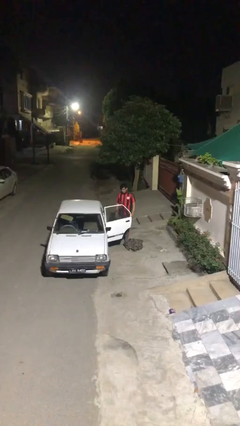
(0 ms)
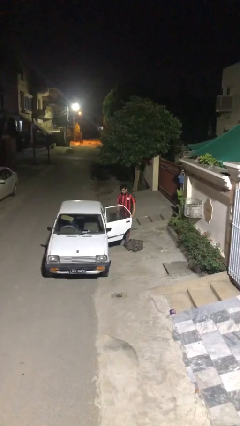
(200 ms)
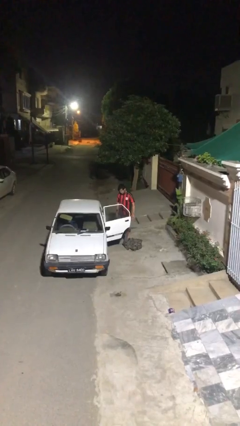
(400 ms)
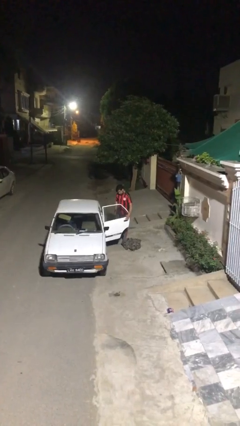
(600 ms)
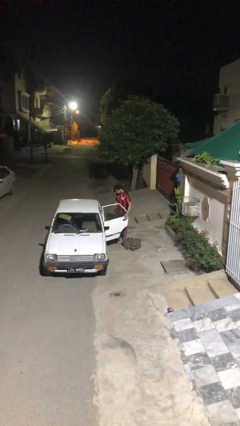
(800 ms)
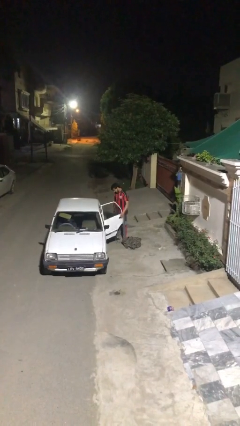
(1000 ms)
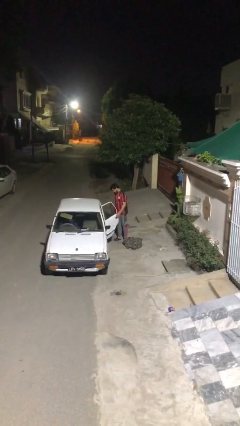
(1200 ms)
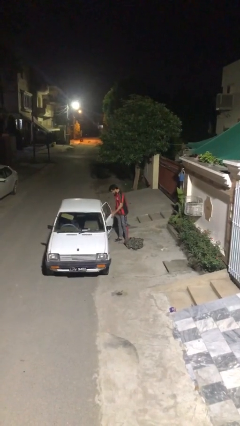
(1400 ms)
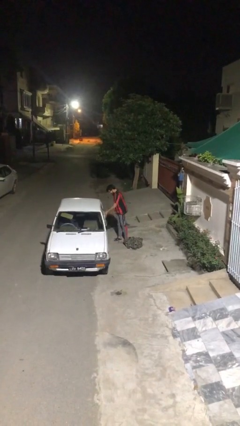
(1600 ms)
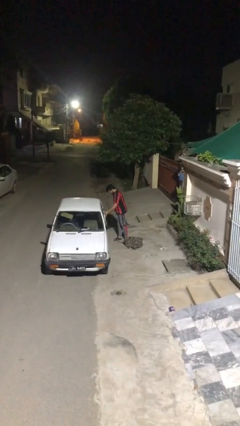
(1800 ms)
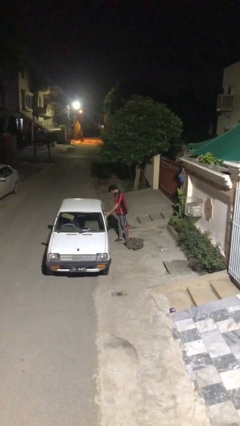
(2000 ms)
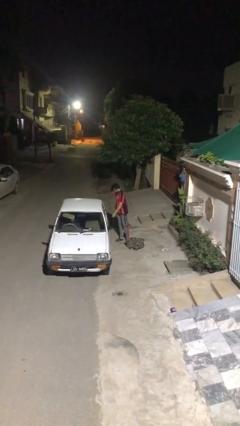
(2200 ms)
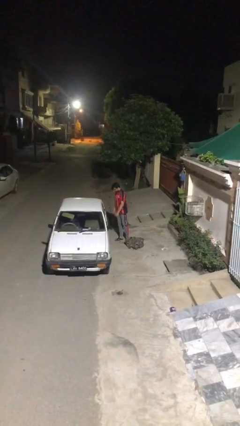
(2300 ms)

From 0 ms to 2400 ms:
person closes car door

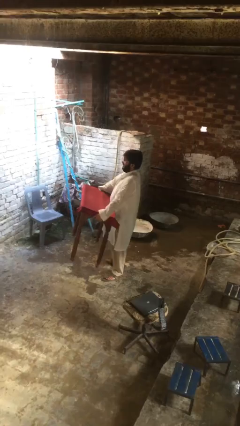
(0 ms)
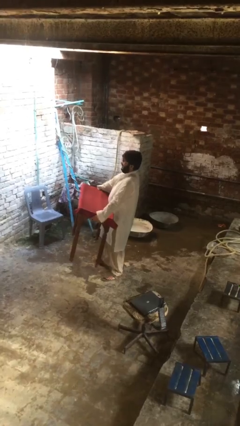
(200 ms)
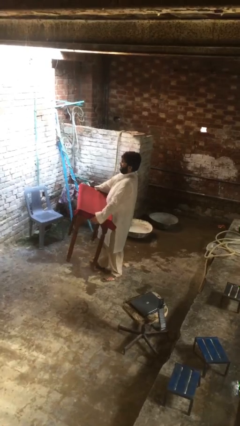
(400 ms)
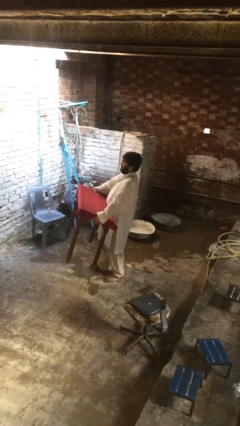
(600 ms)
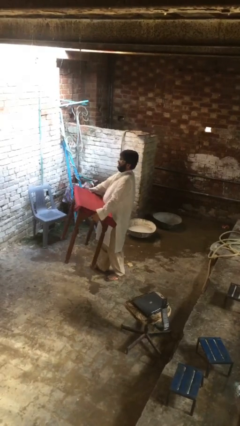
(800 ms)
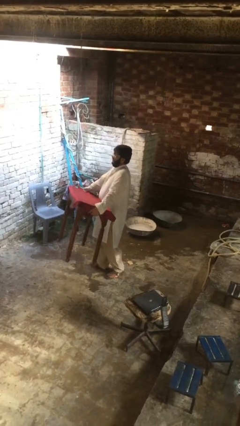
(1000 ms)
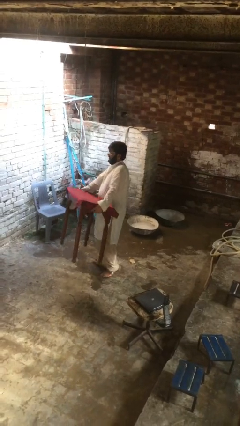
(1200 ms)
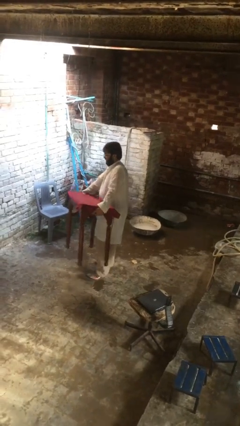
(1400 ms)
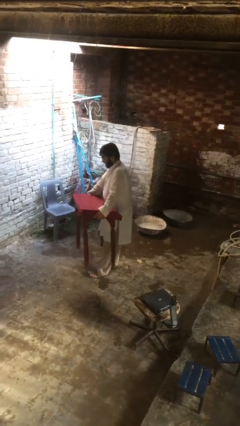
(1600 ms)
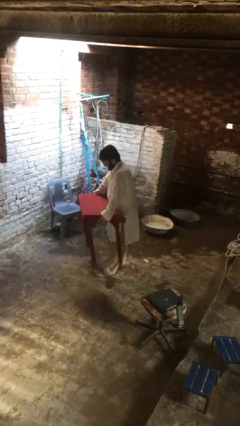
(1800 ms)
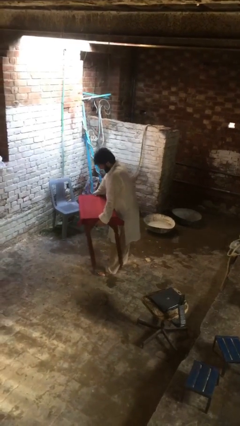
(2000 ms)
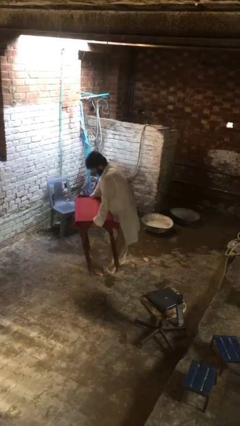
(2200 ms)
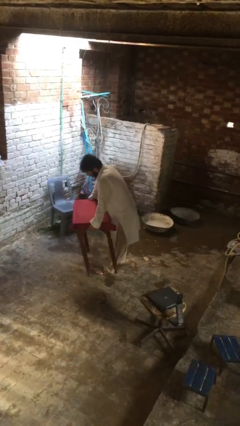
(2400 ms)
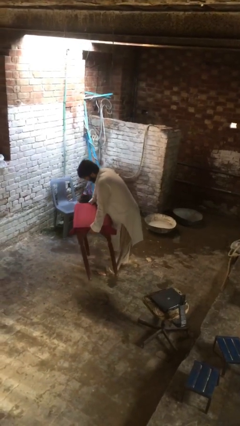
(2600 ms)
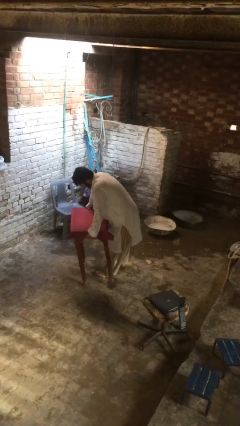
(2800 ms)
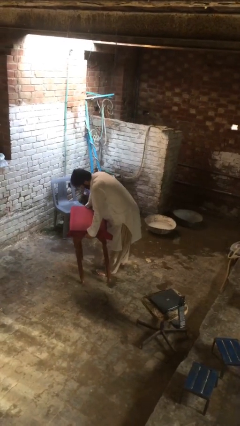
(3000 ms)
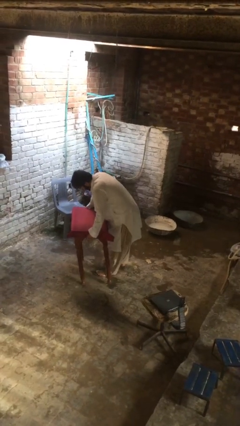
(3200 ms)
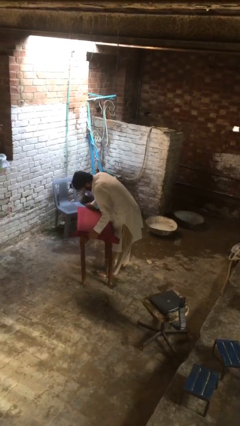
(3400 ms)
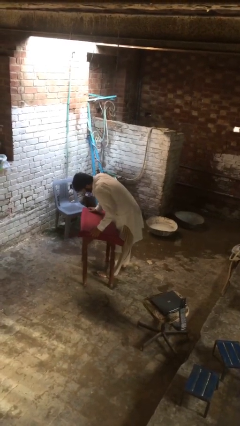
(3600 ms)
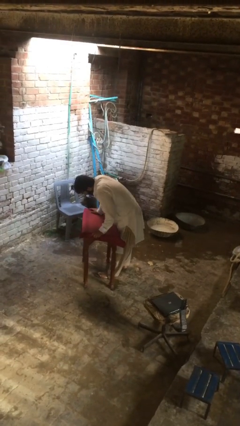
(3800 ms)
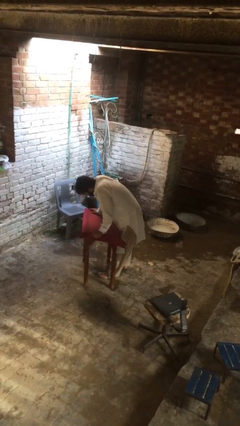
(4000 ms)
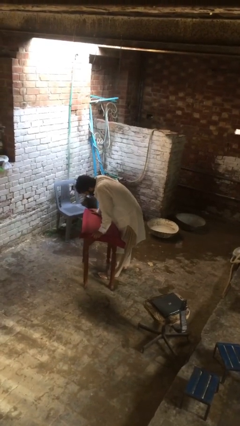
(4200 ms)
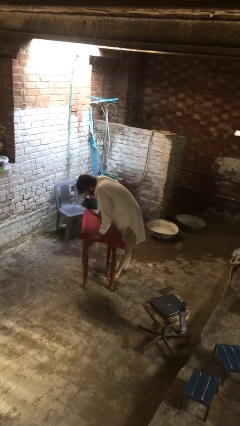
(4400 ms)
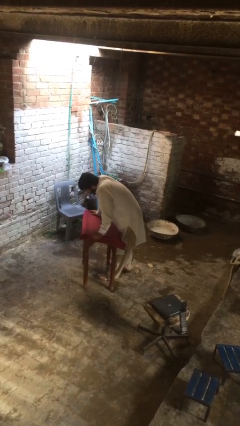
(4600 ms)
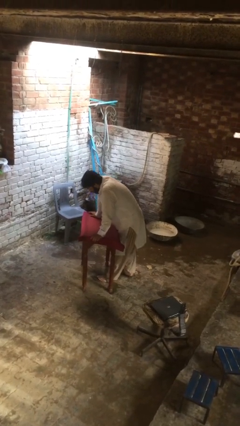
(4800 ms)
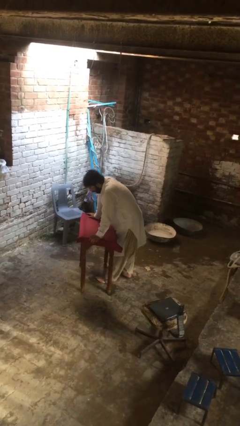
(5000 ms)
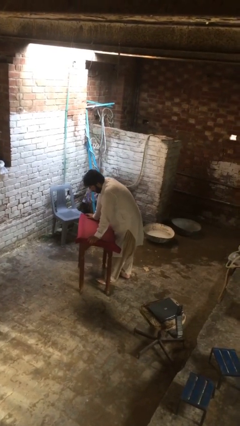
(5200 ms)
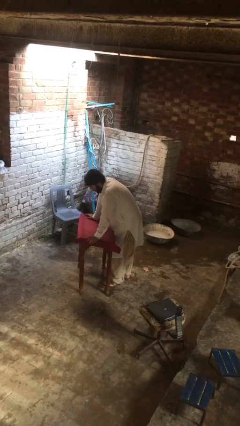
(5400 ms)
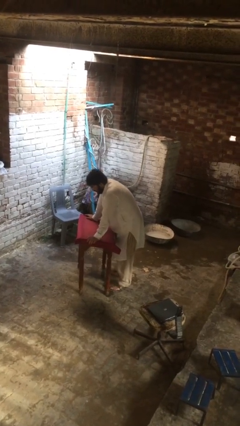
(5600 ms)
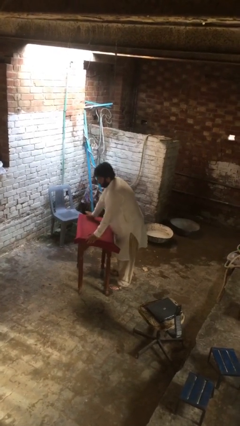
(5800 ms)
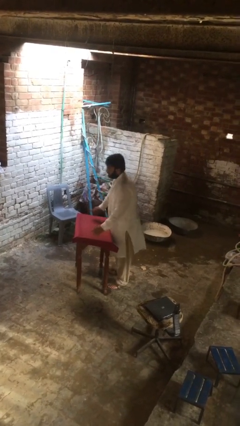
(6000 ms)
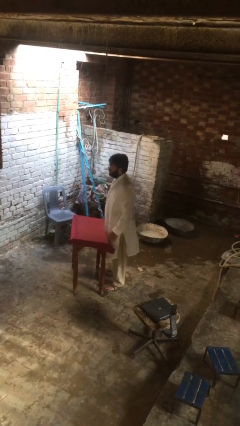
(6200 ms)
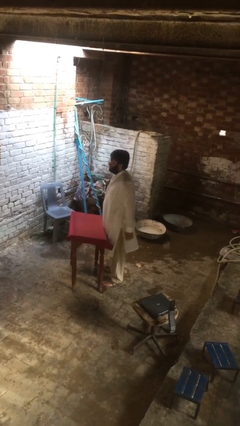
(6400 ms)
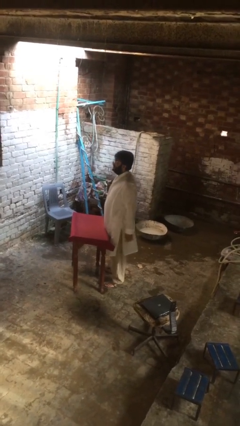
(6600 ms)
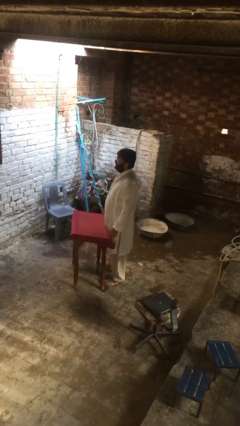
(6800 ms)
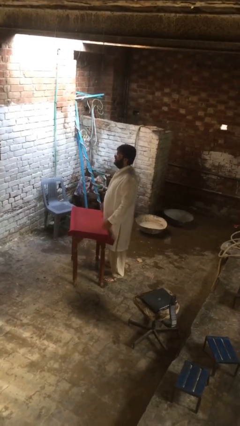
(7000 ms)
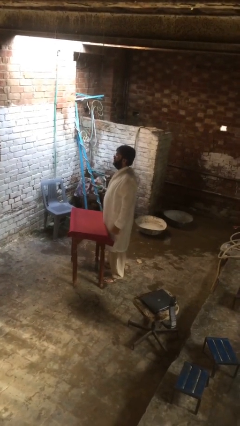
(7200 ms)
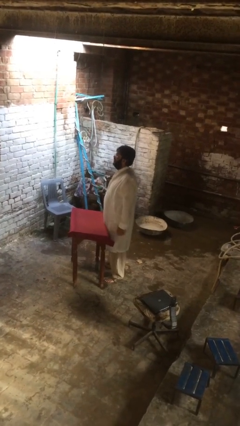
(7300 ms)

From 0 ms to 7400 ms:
person puts down object on floor

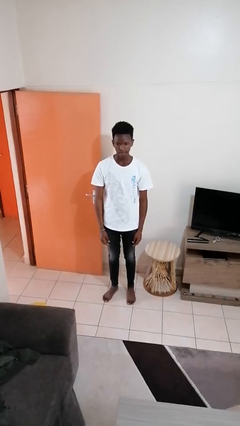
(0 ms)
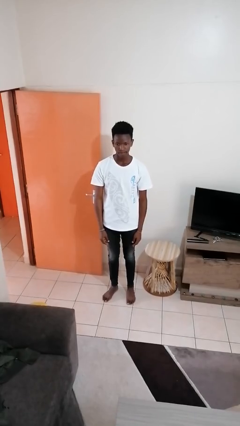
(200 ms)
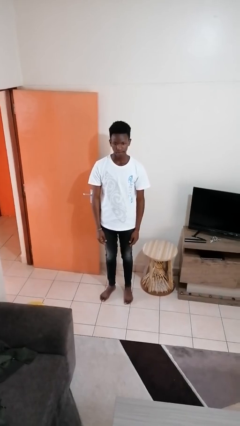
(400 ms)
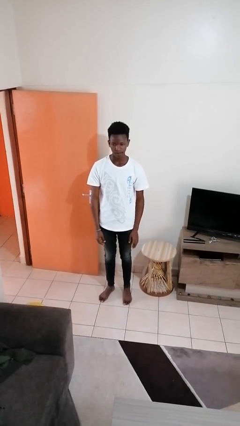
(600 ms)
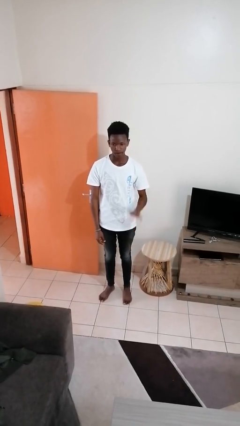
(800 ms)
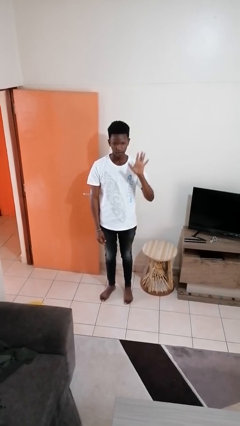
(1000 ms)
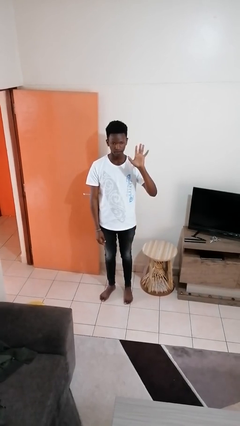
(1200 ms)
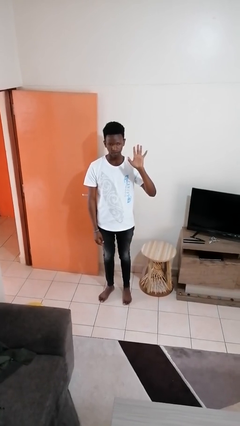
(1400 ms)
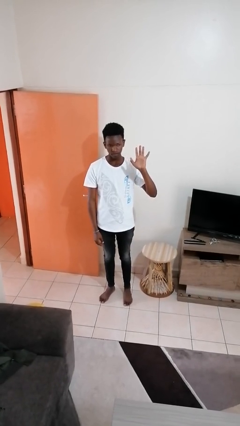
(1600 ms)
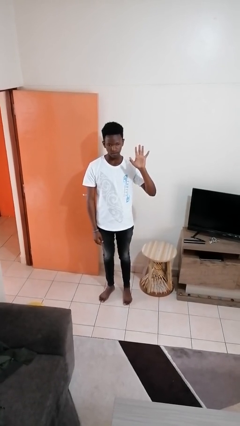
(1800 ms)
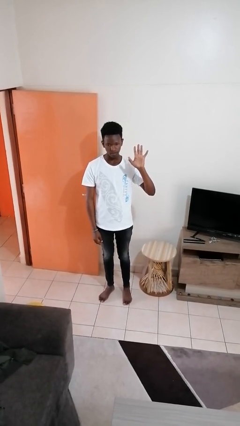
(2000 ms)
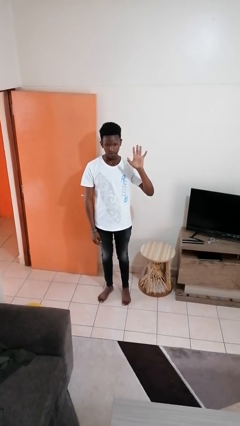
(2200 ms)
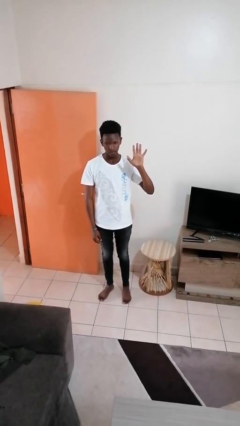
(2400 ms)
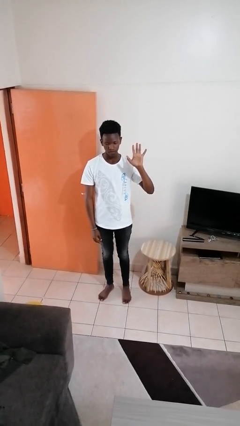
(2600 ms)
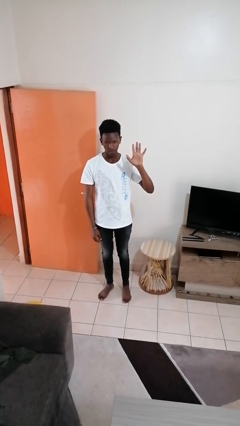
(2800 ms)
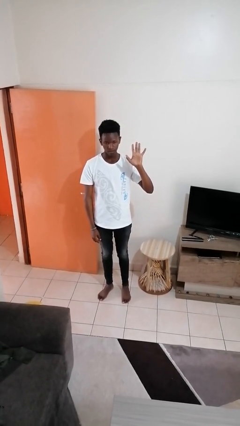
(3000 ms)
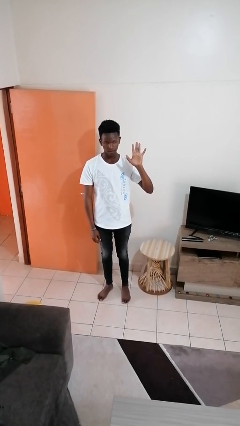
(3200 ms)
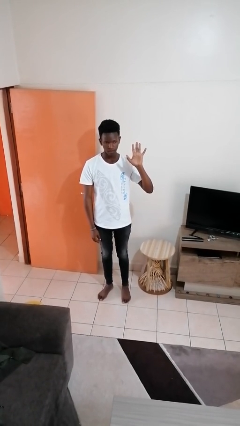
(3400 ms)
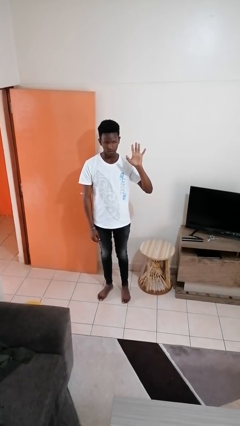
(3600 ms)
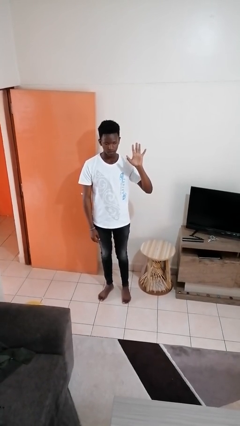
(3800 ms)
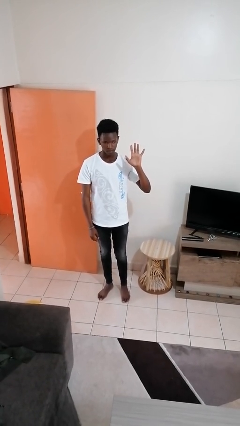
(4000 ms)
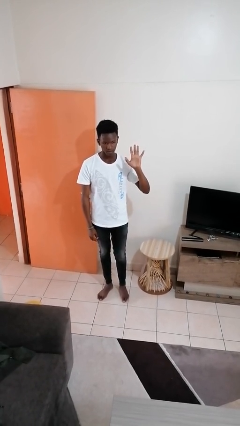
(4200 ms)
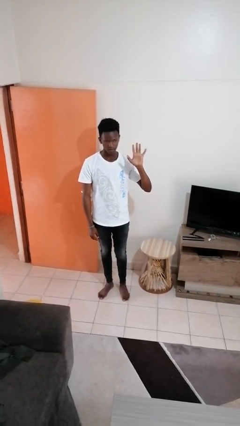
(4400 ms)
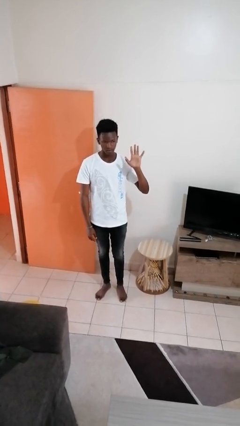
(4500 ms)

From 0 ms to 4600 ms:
person gestures number five

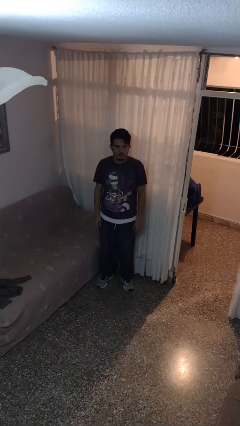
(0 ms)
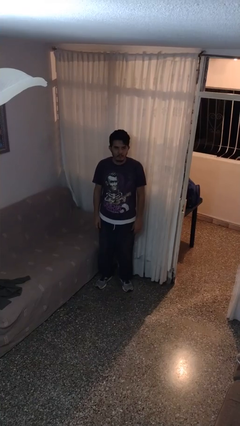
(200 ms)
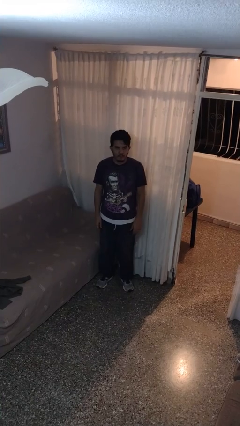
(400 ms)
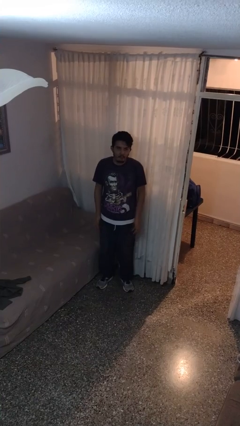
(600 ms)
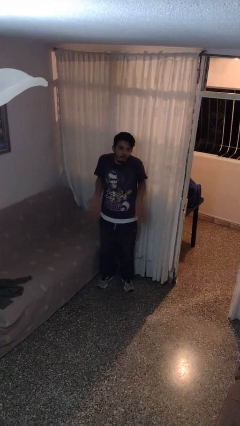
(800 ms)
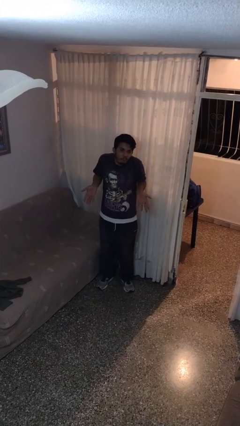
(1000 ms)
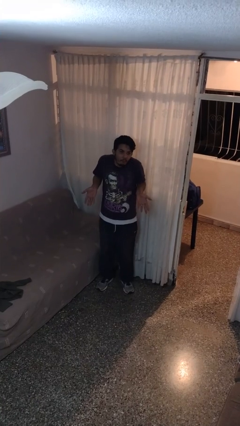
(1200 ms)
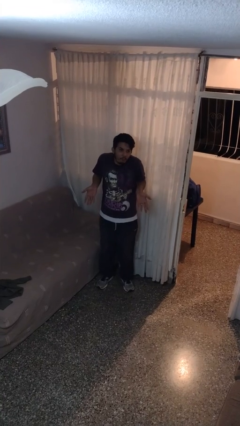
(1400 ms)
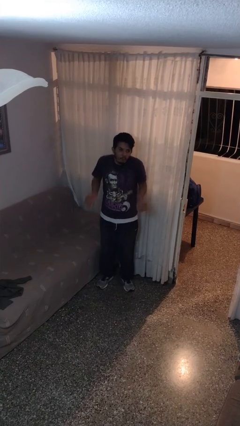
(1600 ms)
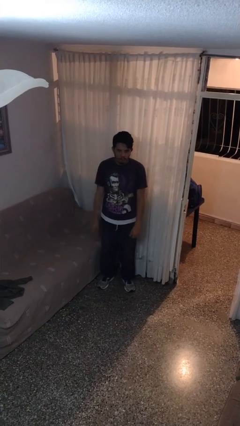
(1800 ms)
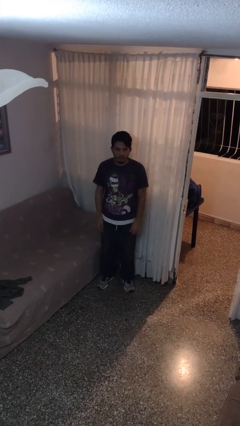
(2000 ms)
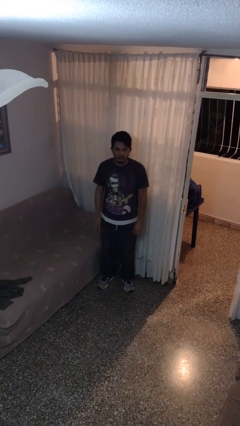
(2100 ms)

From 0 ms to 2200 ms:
person shrugs

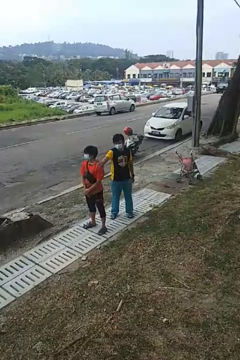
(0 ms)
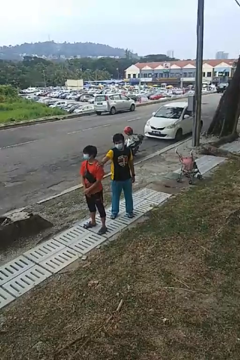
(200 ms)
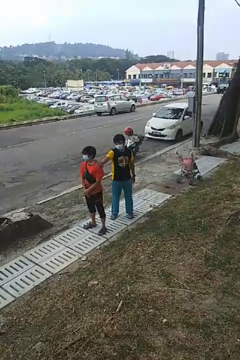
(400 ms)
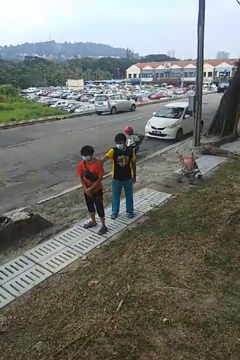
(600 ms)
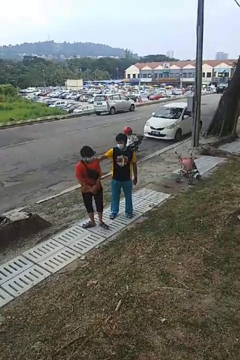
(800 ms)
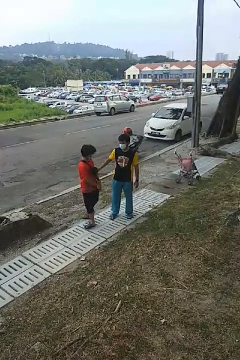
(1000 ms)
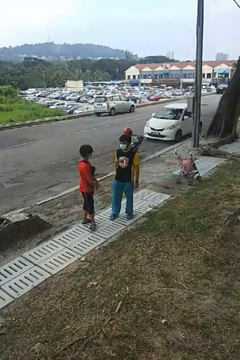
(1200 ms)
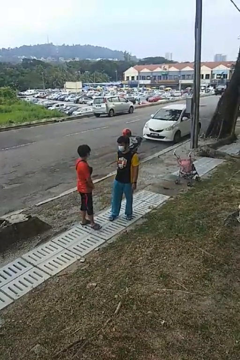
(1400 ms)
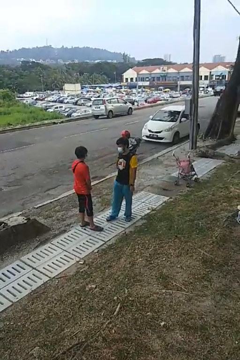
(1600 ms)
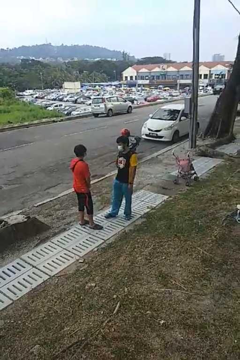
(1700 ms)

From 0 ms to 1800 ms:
person spins person around
